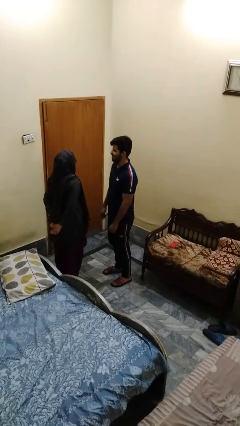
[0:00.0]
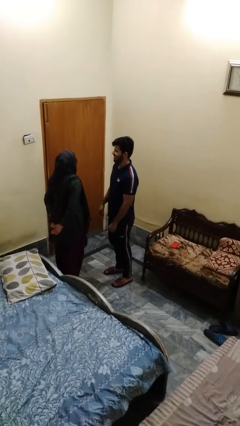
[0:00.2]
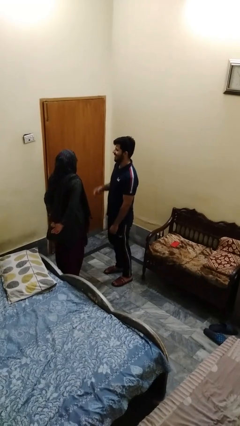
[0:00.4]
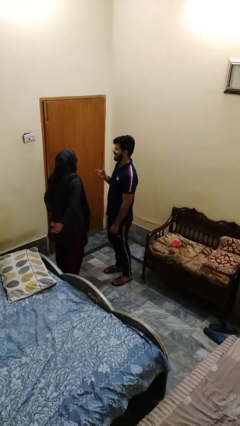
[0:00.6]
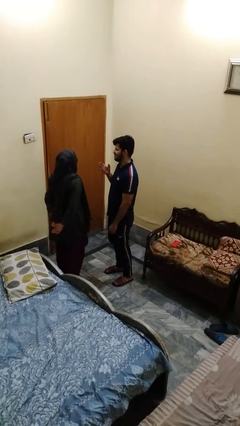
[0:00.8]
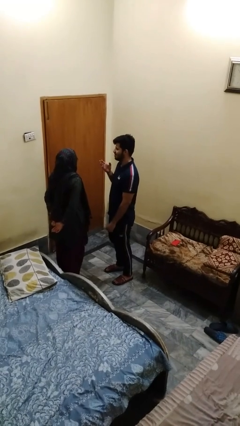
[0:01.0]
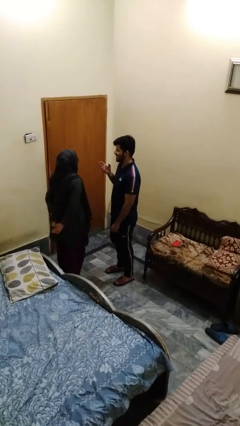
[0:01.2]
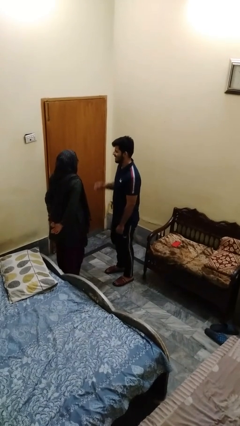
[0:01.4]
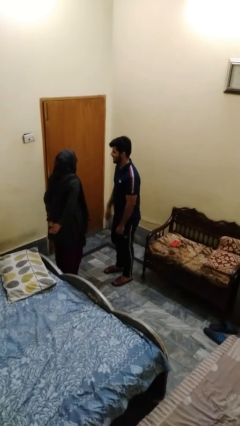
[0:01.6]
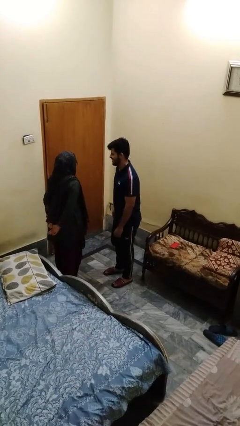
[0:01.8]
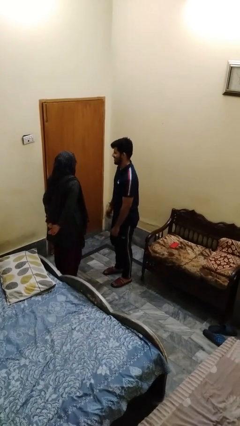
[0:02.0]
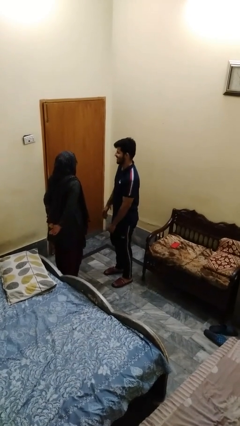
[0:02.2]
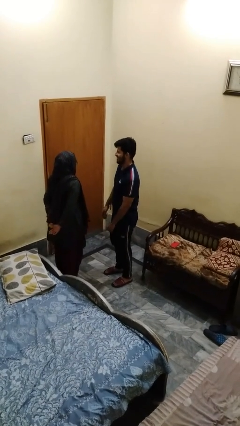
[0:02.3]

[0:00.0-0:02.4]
person laughs with person

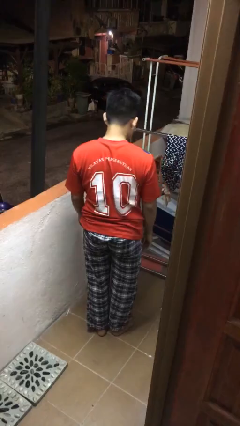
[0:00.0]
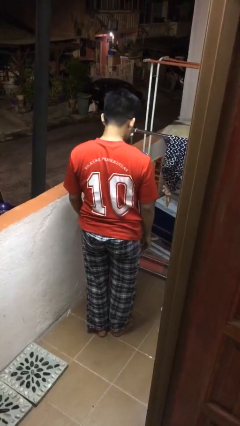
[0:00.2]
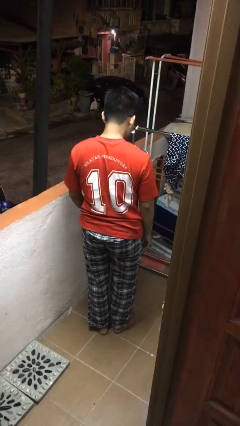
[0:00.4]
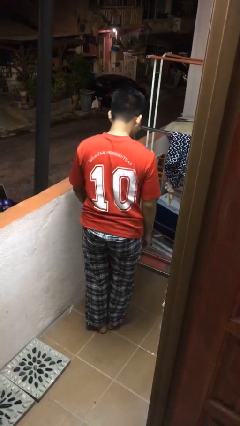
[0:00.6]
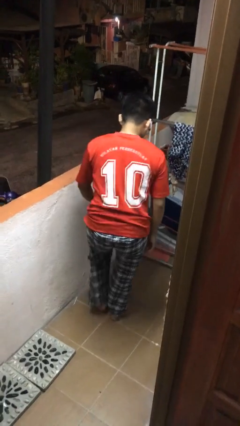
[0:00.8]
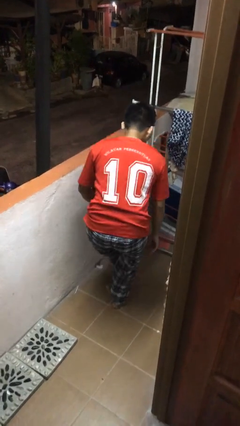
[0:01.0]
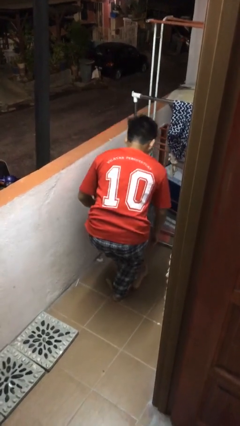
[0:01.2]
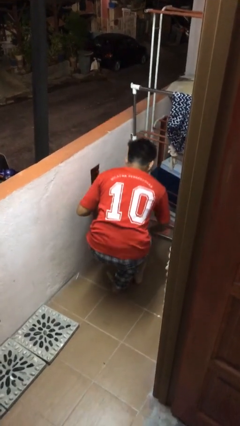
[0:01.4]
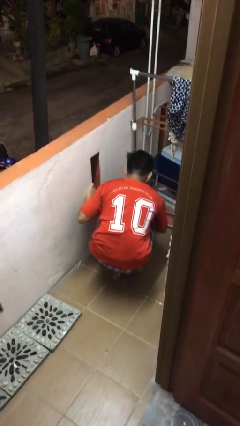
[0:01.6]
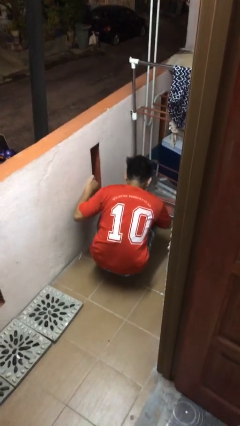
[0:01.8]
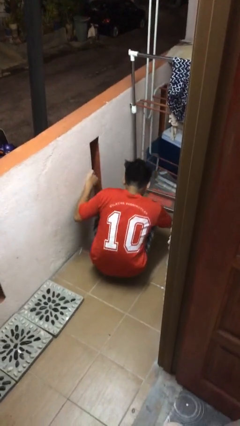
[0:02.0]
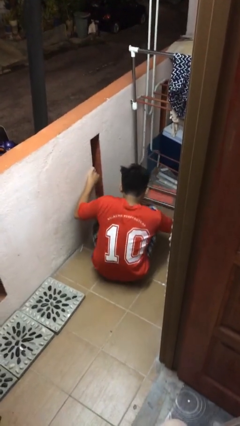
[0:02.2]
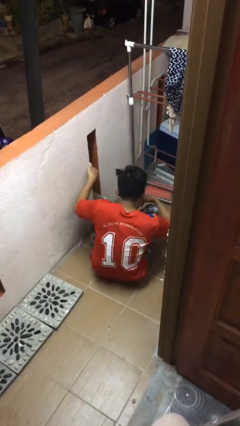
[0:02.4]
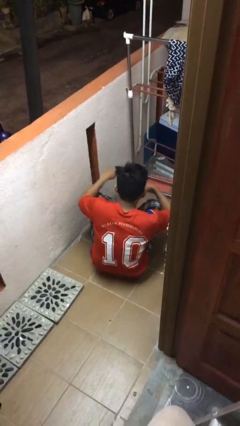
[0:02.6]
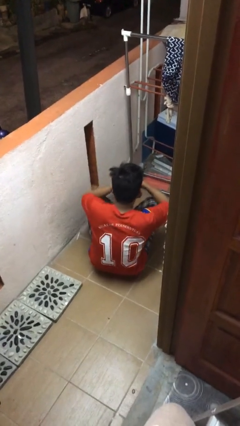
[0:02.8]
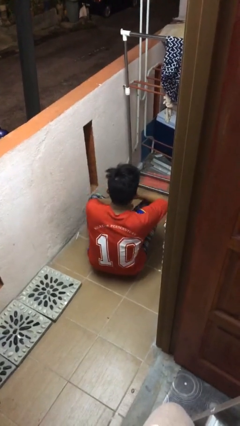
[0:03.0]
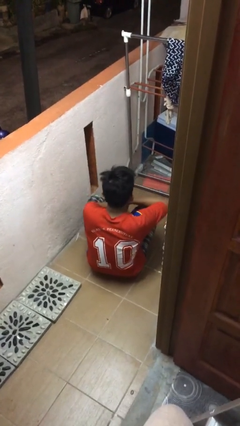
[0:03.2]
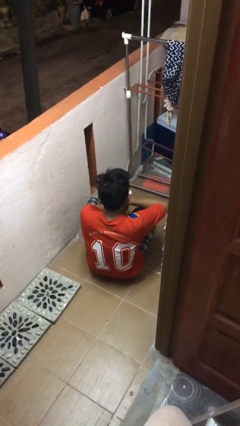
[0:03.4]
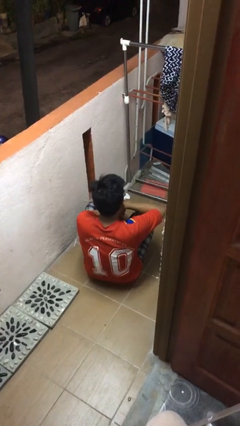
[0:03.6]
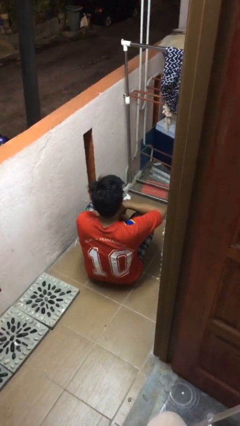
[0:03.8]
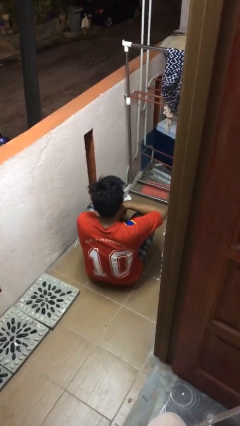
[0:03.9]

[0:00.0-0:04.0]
person sits crisscross

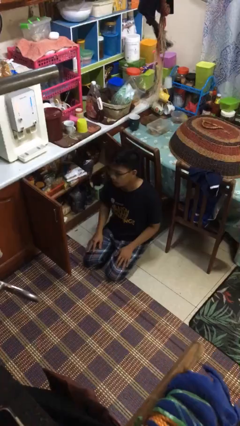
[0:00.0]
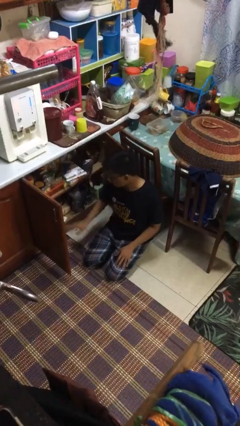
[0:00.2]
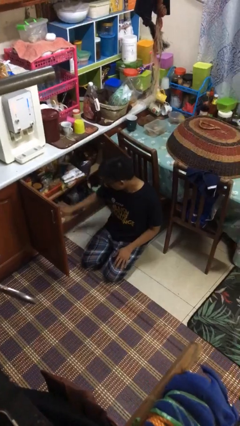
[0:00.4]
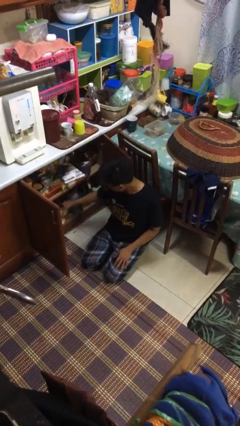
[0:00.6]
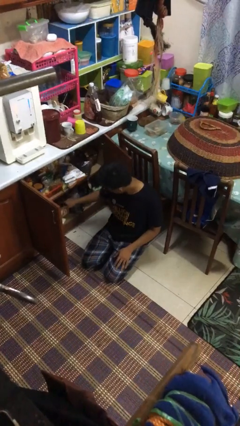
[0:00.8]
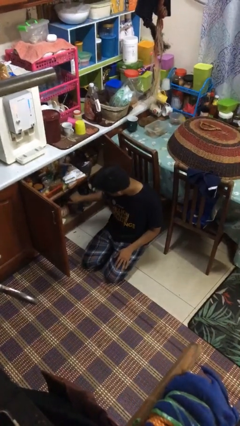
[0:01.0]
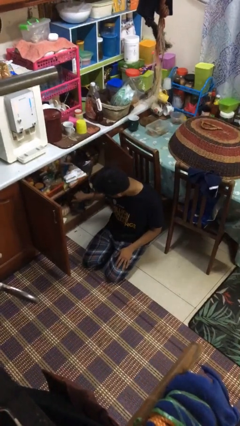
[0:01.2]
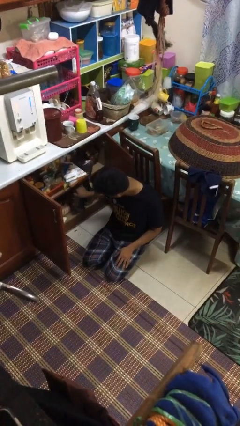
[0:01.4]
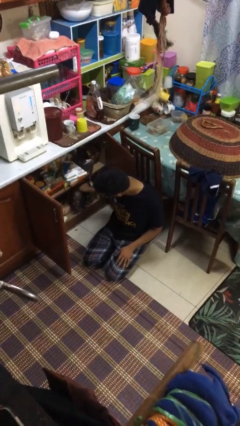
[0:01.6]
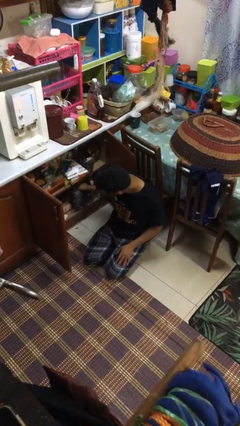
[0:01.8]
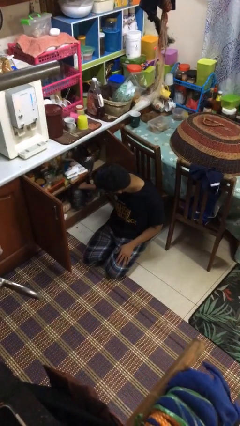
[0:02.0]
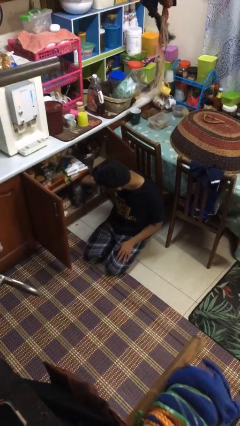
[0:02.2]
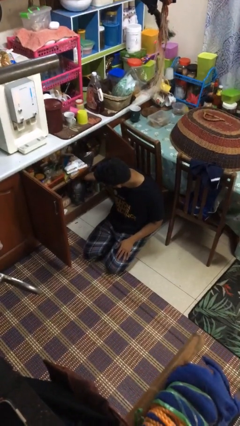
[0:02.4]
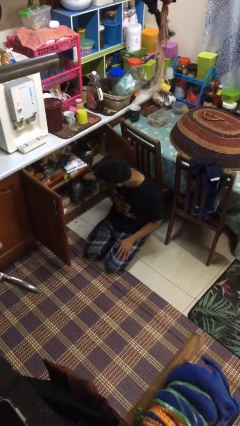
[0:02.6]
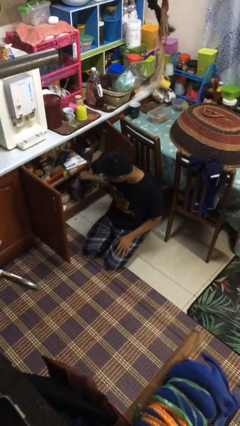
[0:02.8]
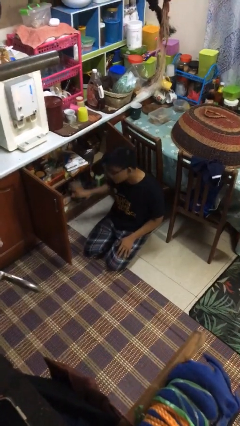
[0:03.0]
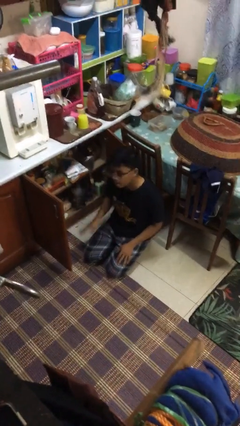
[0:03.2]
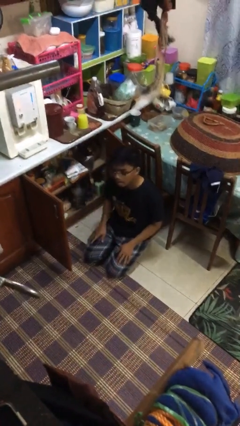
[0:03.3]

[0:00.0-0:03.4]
person searches in kitchen drawer

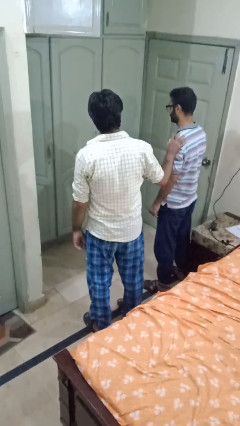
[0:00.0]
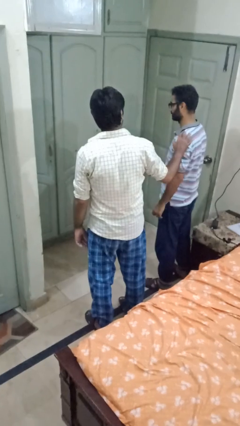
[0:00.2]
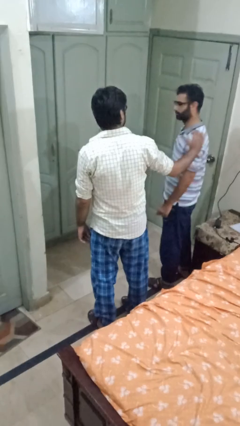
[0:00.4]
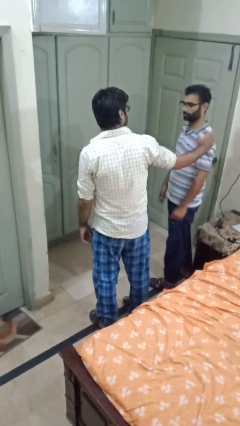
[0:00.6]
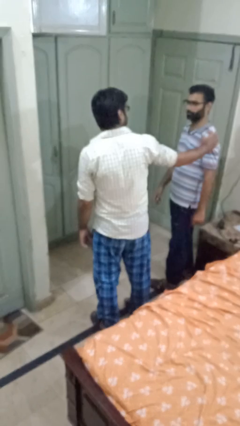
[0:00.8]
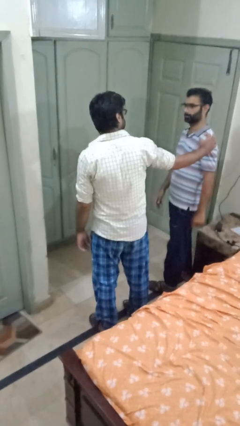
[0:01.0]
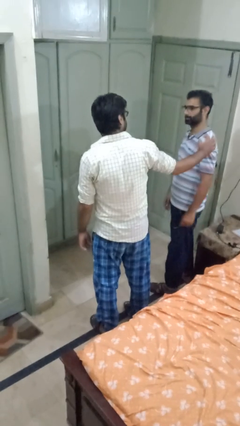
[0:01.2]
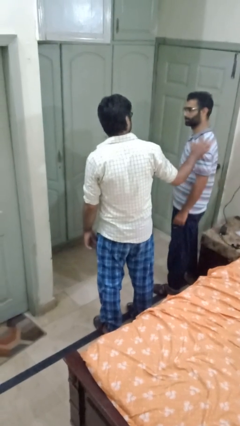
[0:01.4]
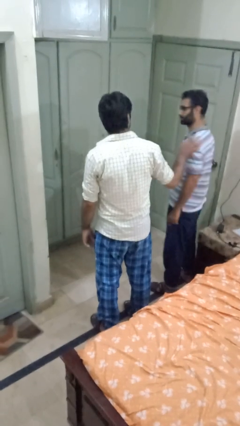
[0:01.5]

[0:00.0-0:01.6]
person spins person around

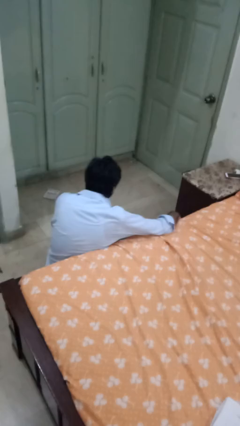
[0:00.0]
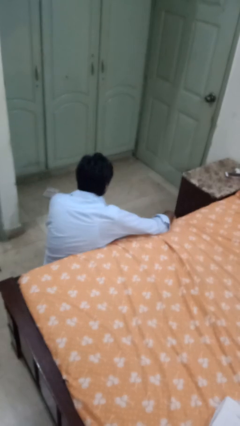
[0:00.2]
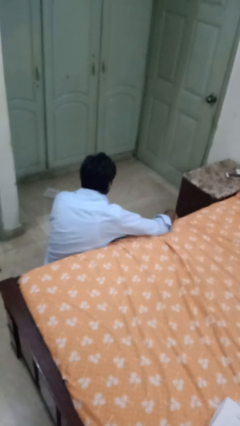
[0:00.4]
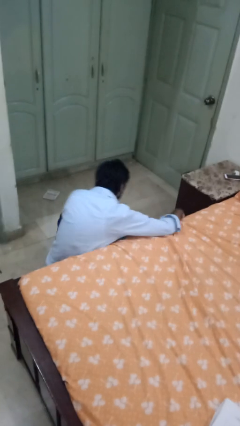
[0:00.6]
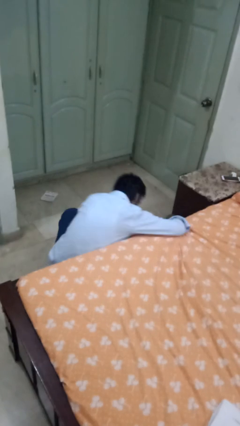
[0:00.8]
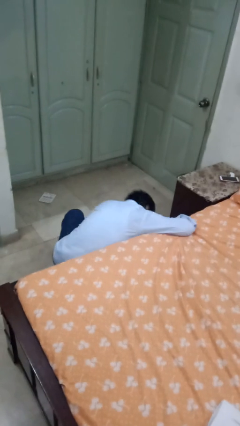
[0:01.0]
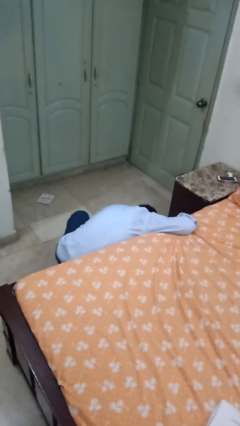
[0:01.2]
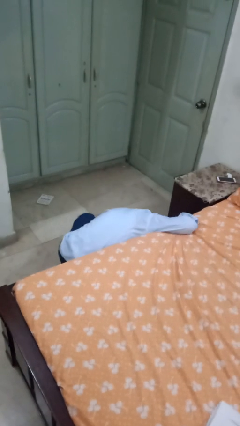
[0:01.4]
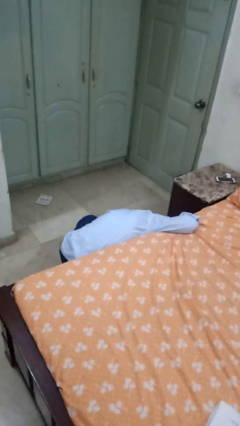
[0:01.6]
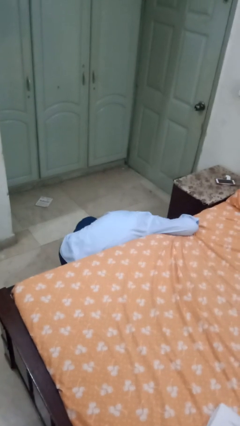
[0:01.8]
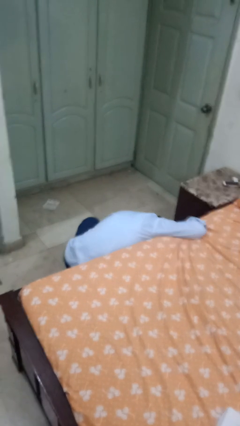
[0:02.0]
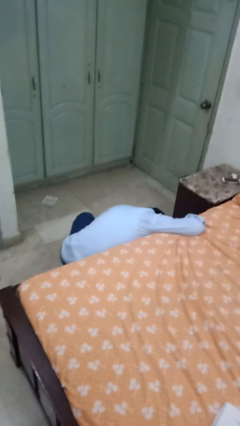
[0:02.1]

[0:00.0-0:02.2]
person searches under bed

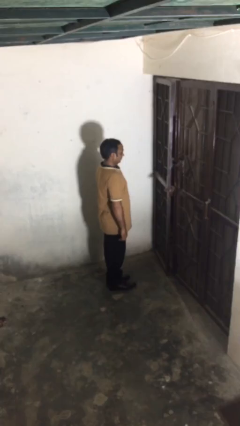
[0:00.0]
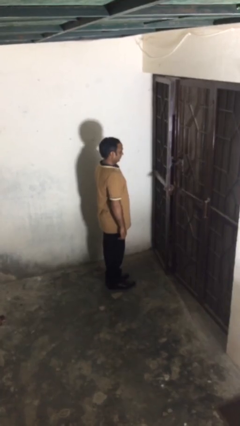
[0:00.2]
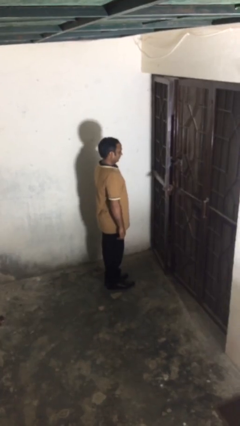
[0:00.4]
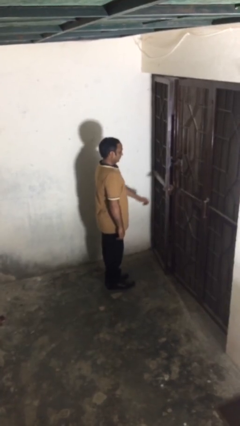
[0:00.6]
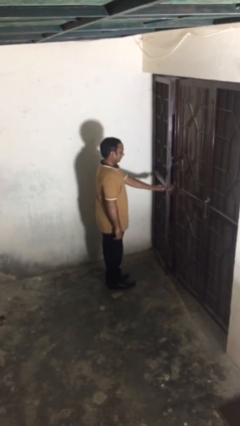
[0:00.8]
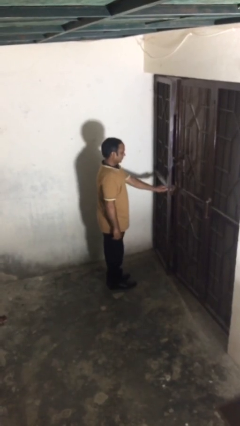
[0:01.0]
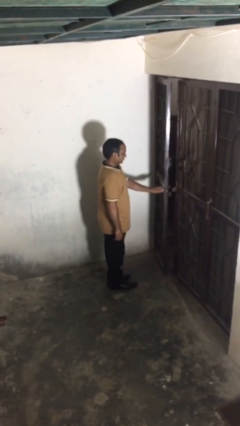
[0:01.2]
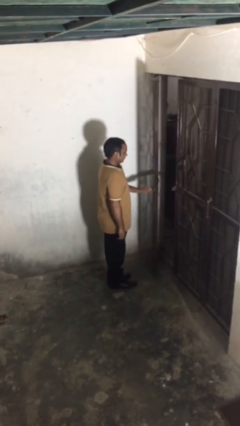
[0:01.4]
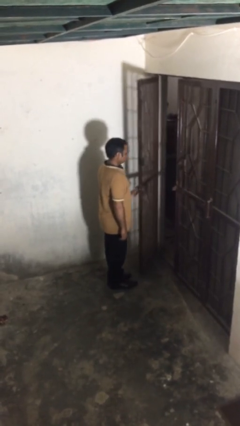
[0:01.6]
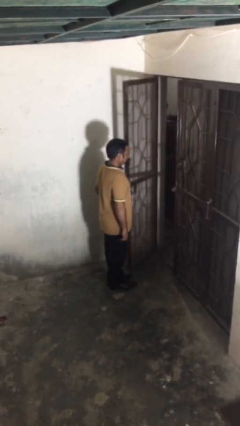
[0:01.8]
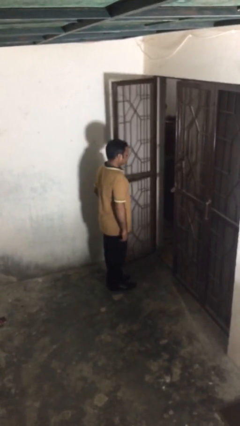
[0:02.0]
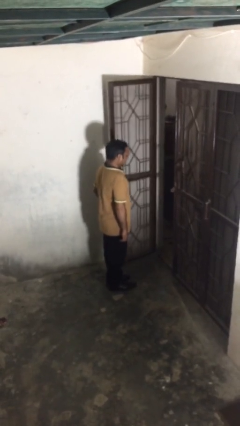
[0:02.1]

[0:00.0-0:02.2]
person opens facility door

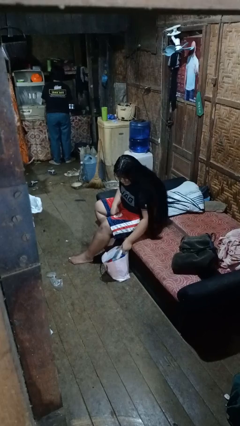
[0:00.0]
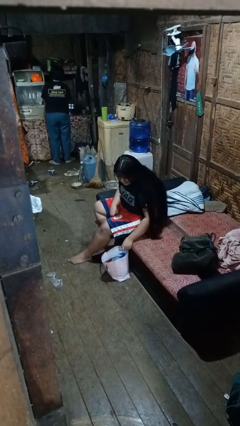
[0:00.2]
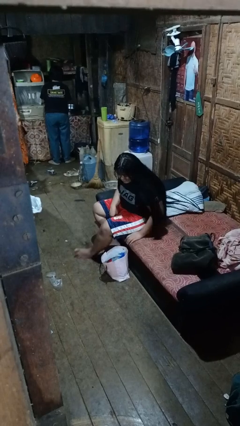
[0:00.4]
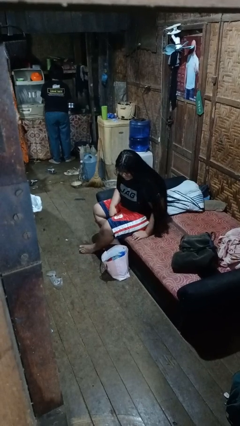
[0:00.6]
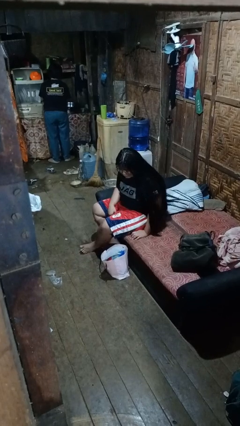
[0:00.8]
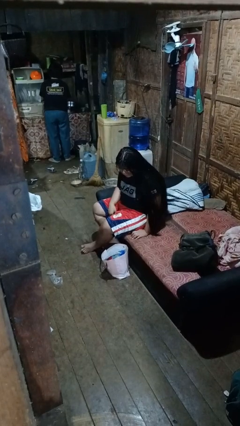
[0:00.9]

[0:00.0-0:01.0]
person puts object into bag

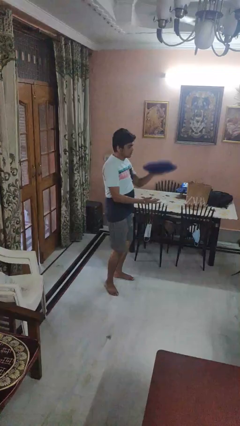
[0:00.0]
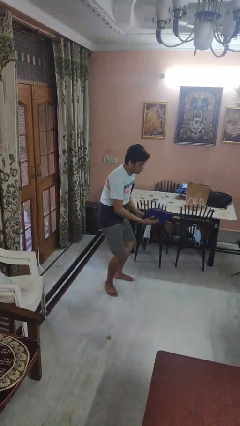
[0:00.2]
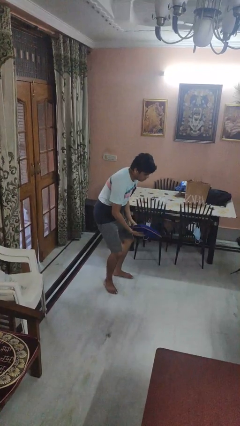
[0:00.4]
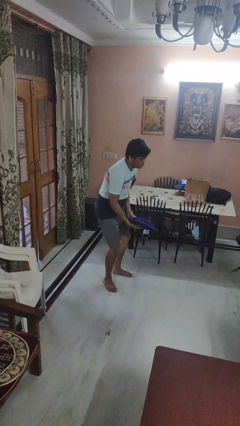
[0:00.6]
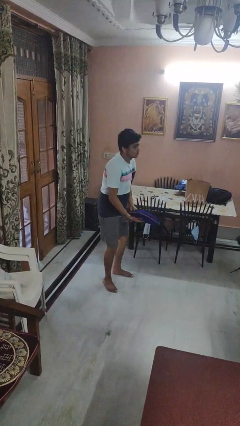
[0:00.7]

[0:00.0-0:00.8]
person catches dropped object
